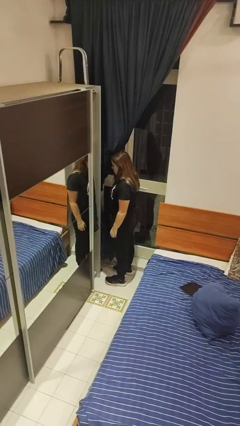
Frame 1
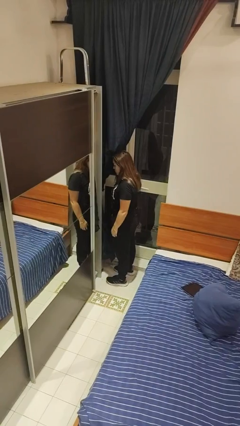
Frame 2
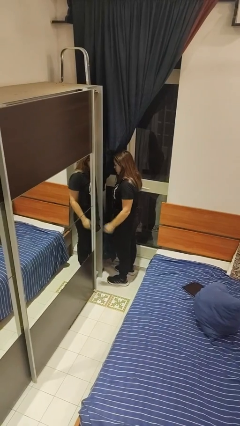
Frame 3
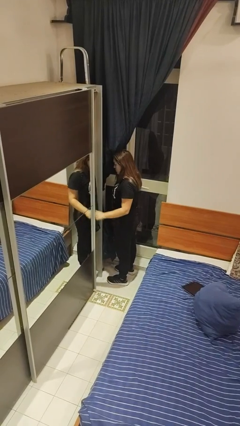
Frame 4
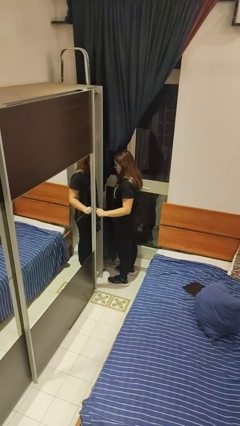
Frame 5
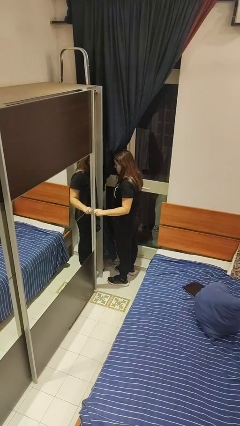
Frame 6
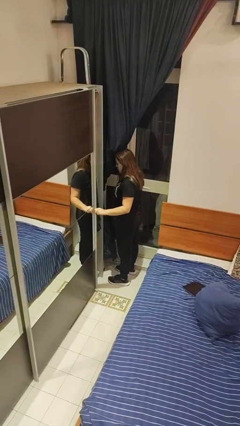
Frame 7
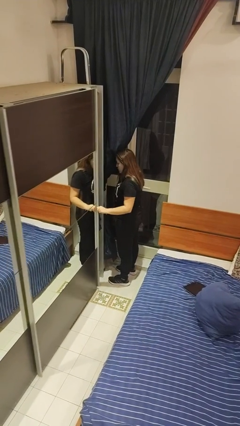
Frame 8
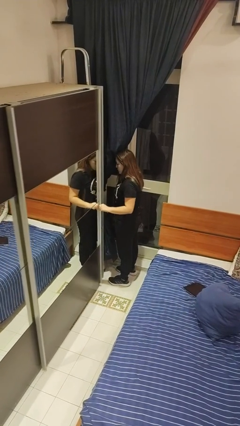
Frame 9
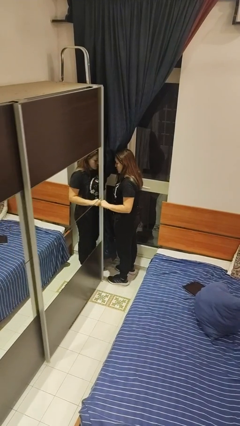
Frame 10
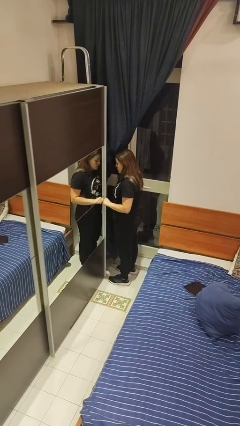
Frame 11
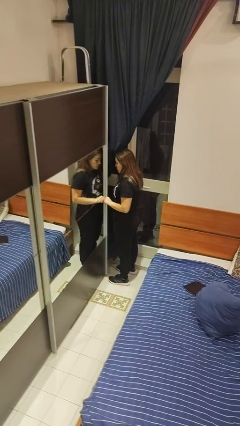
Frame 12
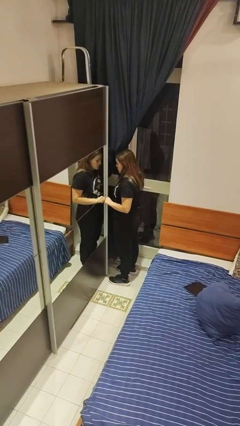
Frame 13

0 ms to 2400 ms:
person closes closet door

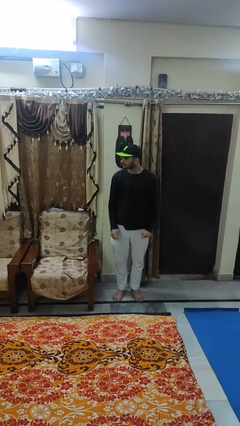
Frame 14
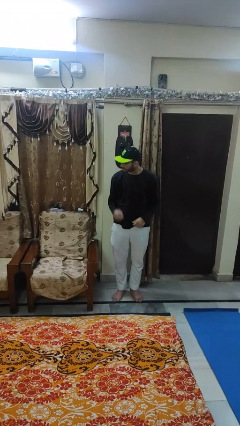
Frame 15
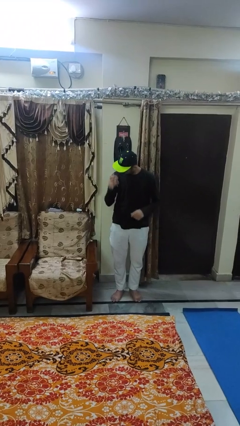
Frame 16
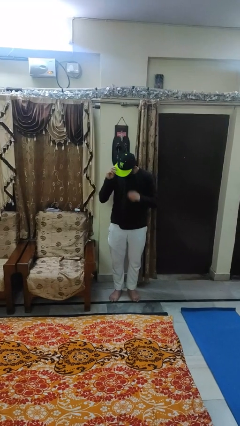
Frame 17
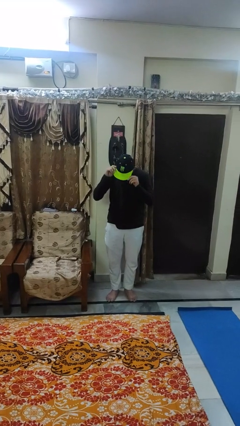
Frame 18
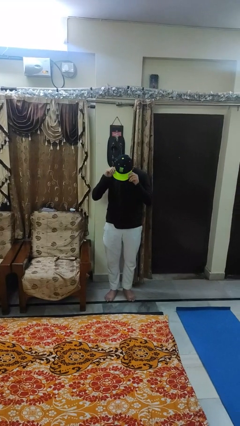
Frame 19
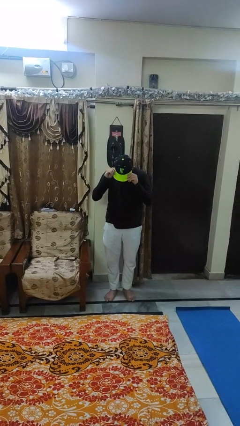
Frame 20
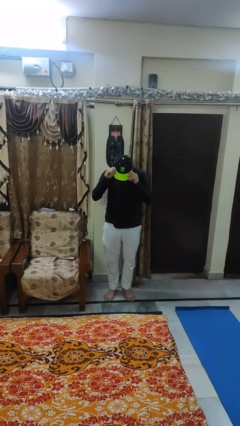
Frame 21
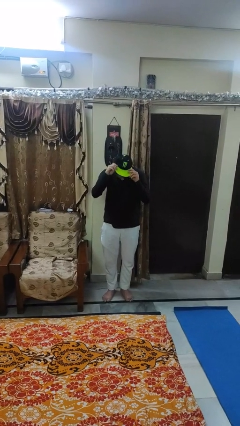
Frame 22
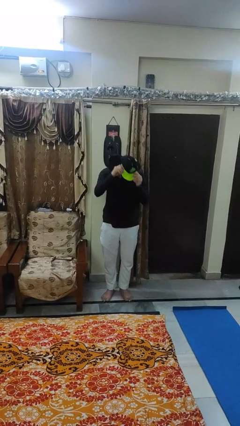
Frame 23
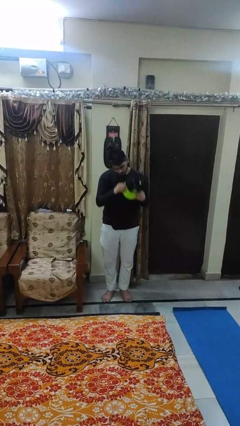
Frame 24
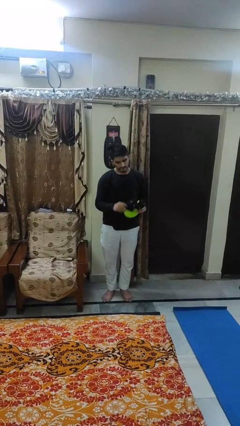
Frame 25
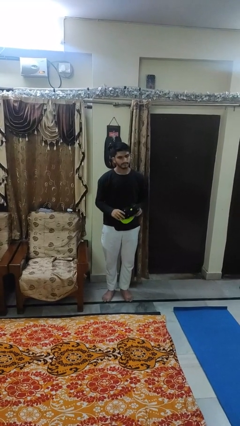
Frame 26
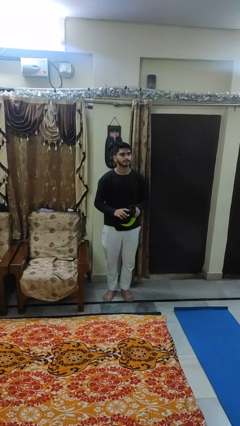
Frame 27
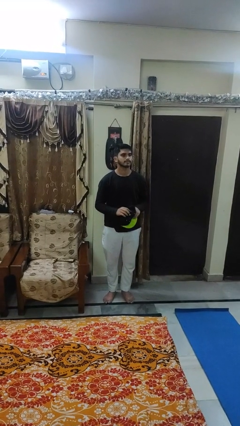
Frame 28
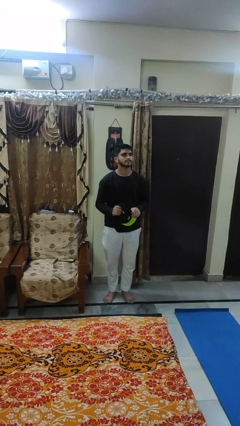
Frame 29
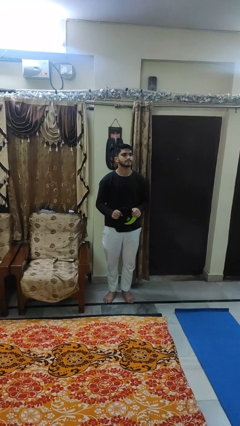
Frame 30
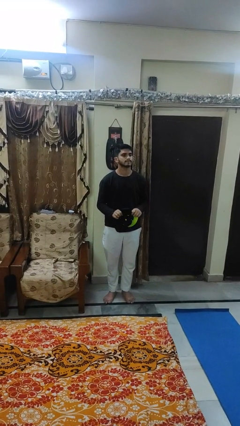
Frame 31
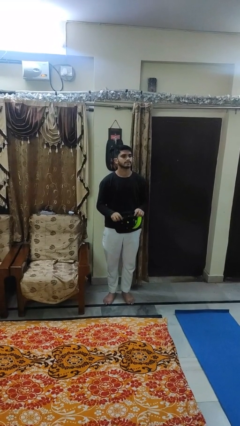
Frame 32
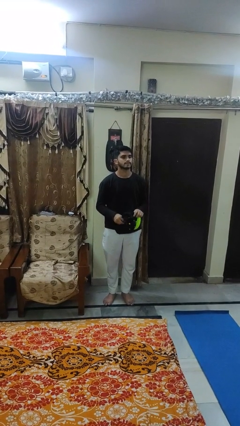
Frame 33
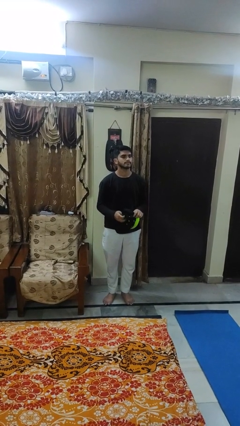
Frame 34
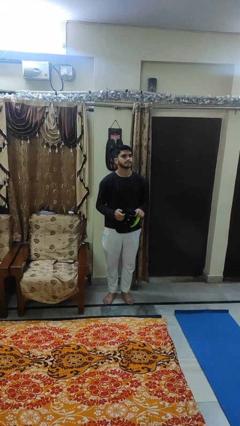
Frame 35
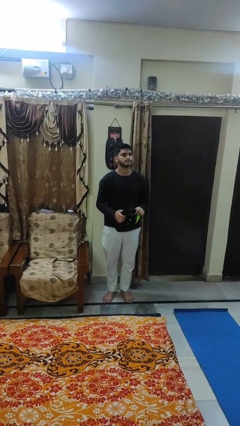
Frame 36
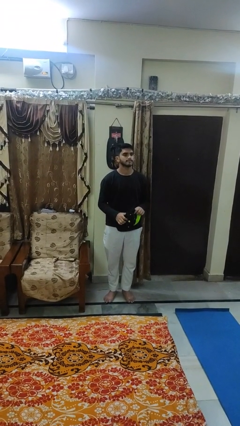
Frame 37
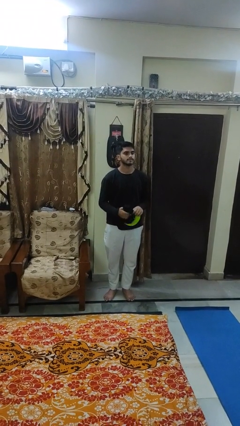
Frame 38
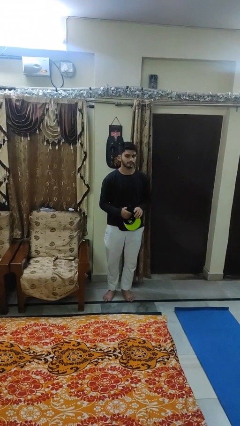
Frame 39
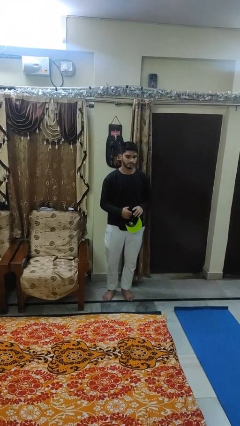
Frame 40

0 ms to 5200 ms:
person takes off hat

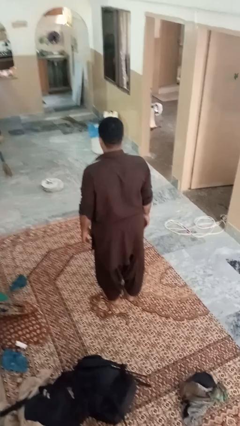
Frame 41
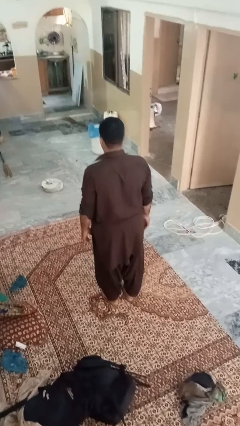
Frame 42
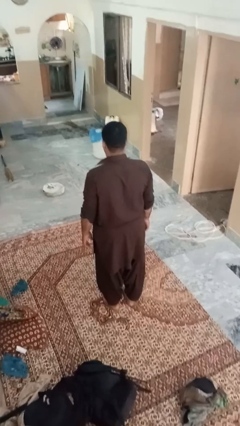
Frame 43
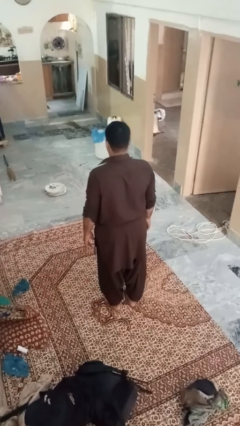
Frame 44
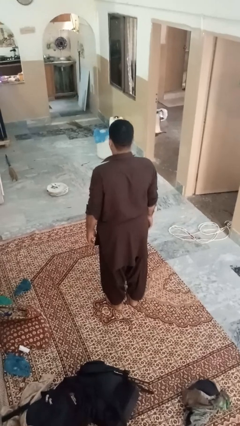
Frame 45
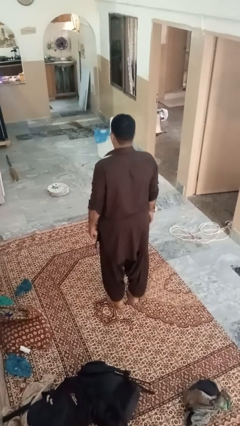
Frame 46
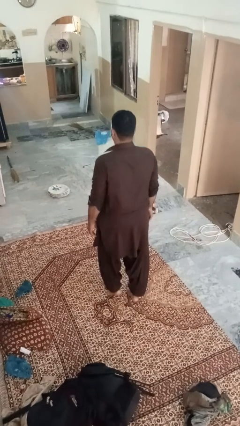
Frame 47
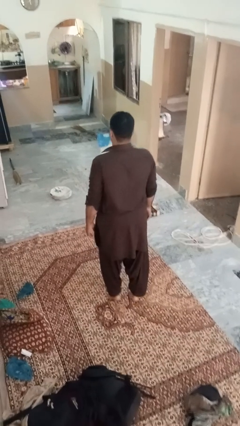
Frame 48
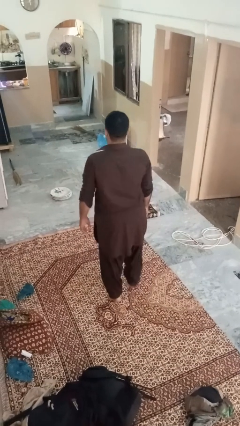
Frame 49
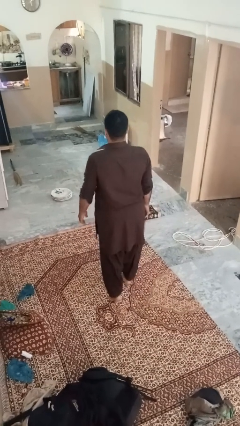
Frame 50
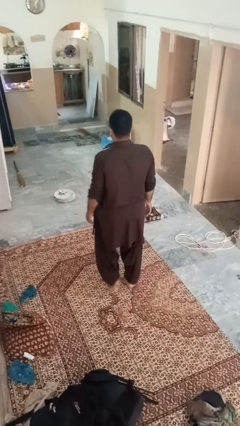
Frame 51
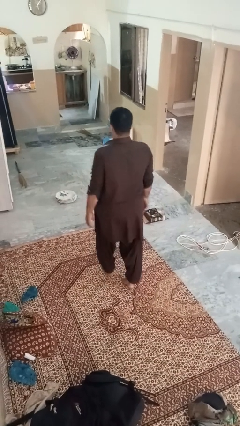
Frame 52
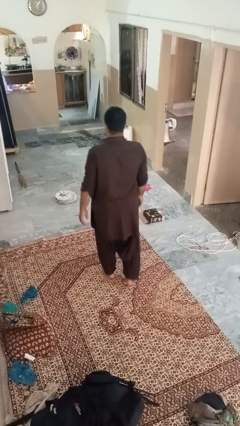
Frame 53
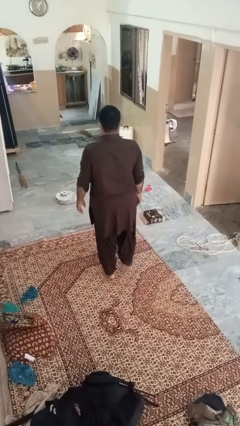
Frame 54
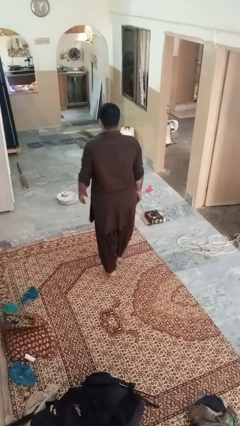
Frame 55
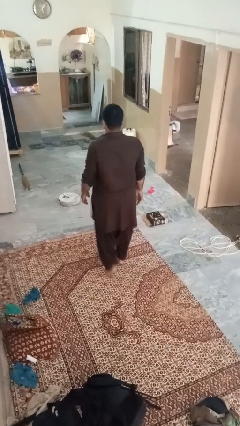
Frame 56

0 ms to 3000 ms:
person walks tiptoe

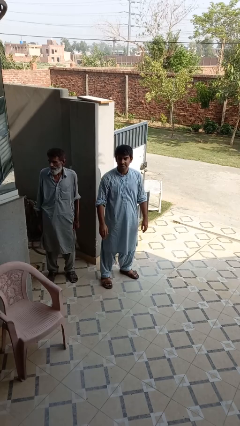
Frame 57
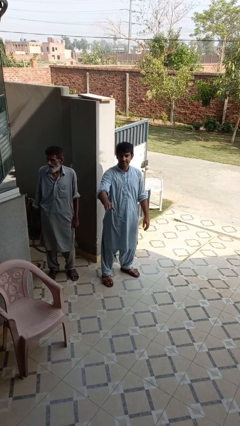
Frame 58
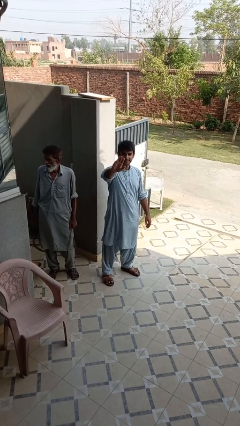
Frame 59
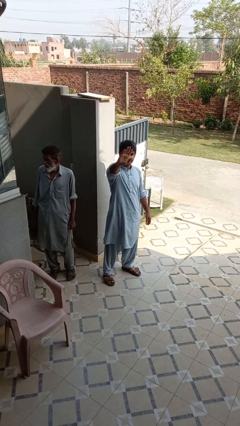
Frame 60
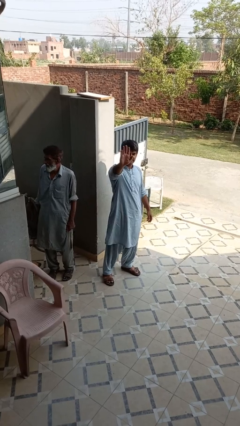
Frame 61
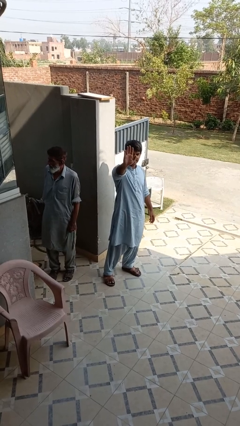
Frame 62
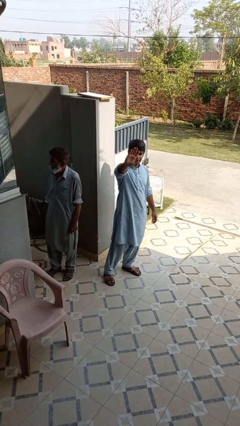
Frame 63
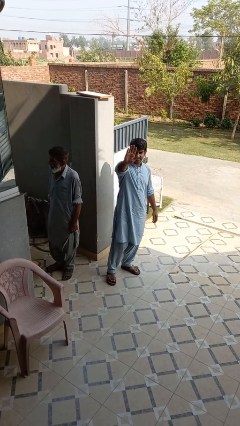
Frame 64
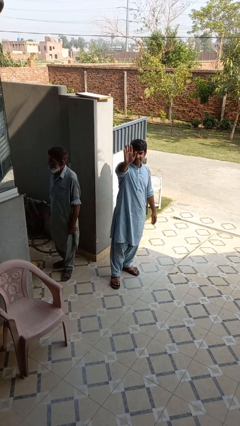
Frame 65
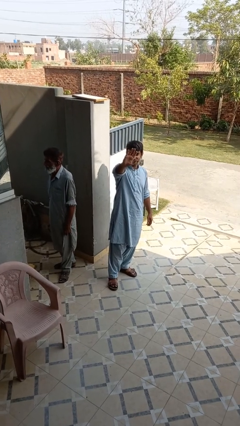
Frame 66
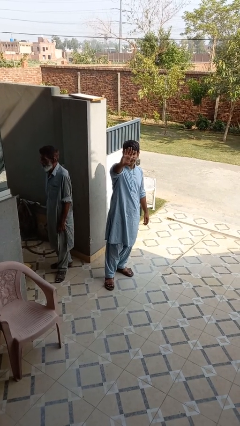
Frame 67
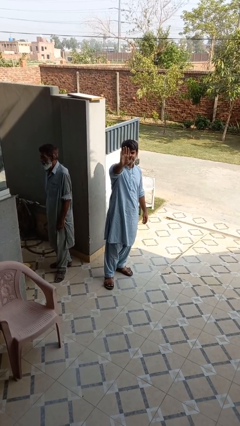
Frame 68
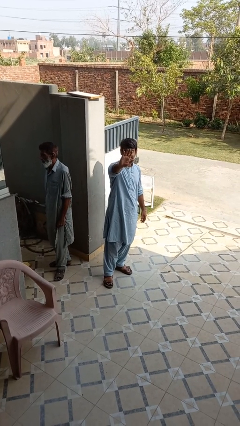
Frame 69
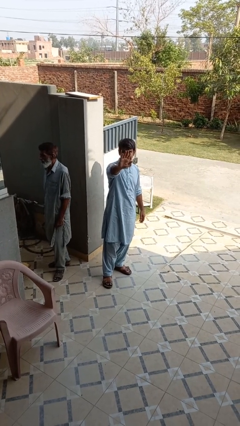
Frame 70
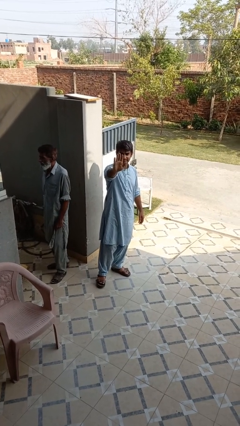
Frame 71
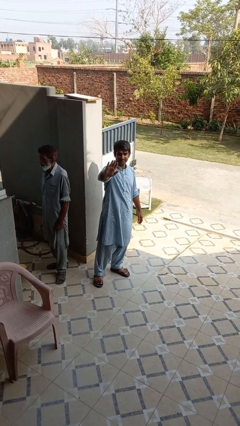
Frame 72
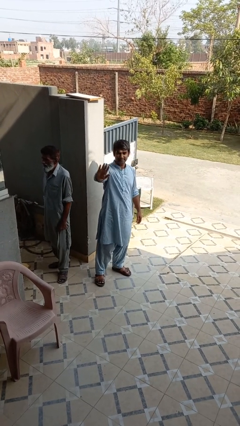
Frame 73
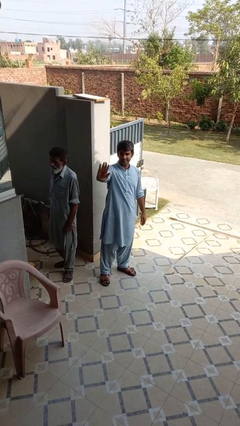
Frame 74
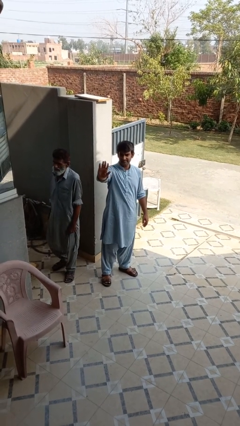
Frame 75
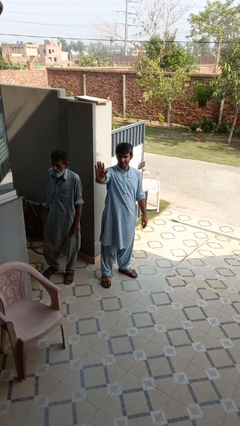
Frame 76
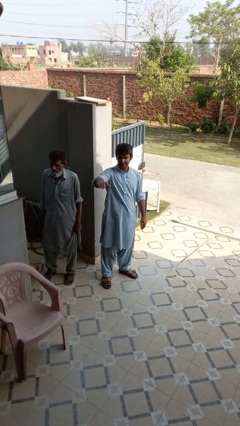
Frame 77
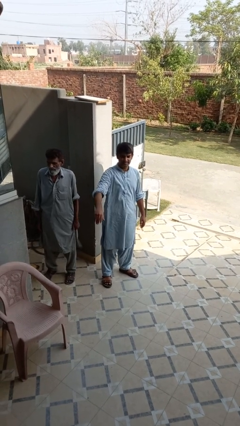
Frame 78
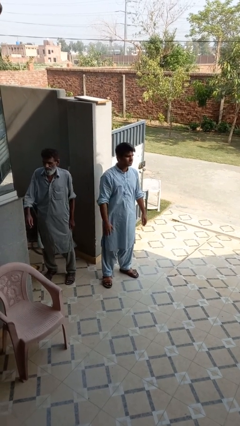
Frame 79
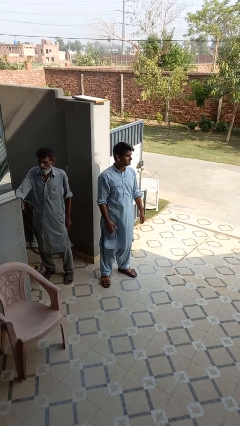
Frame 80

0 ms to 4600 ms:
person waves at person

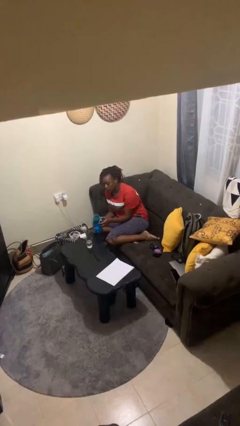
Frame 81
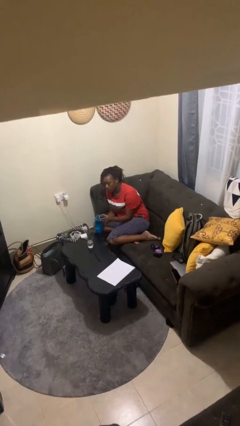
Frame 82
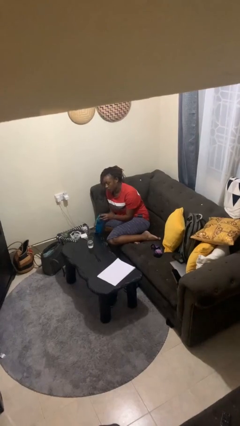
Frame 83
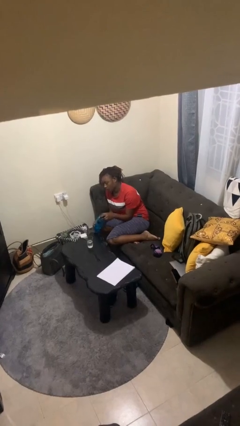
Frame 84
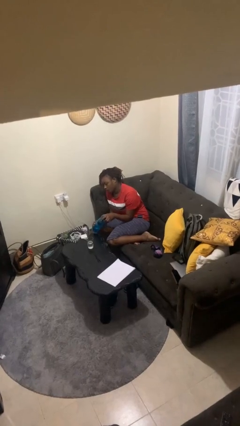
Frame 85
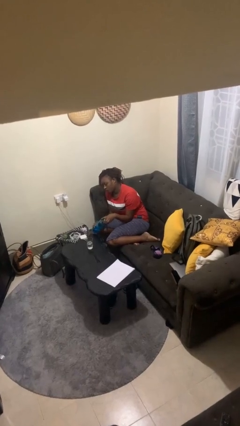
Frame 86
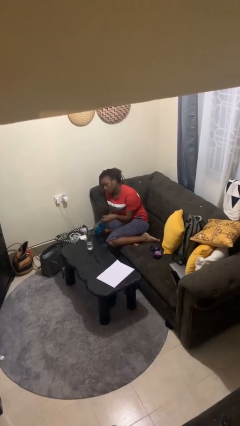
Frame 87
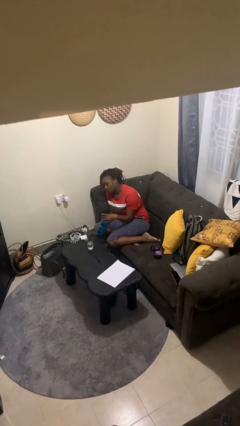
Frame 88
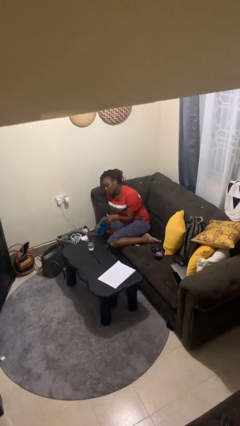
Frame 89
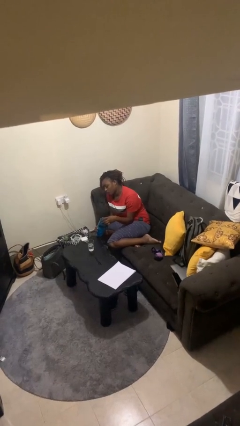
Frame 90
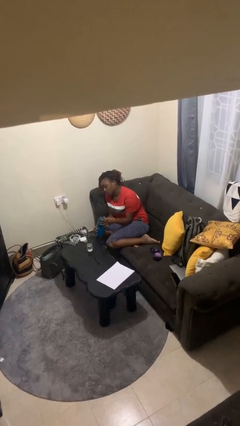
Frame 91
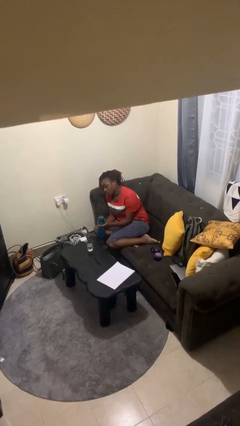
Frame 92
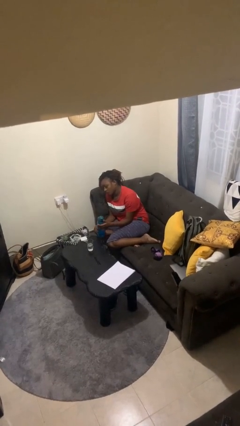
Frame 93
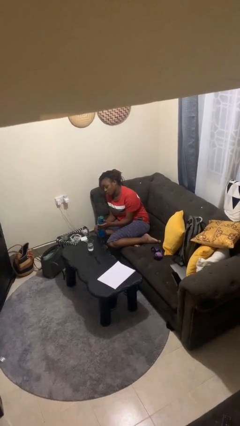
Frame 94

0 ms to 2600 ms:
person screws lid to bottle
